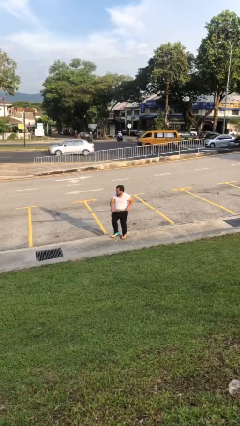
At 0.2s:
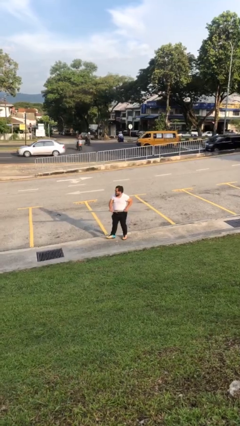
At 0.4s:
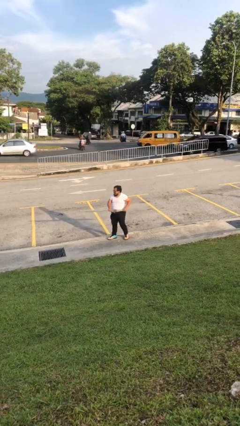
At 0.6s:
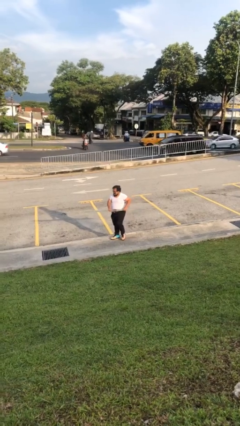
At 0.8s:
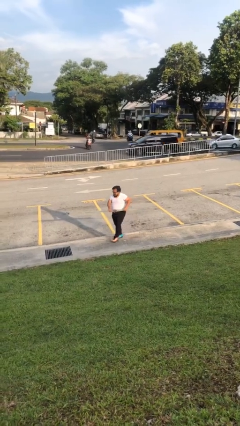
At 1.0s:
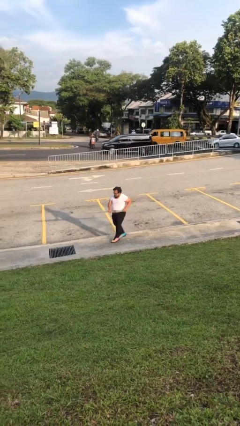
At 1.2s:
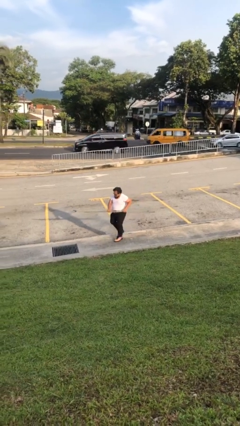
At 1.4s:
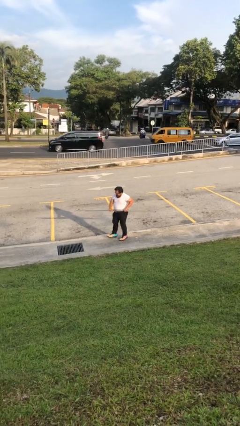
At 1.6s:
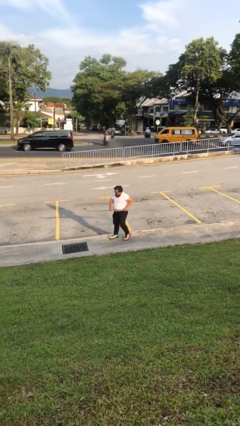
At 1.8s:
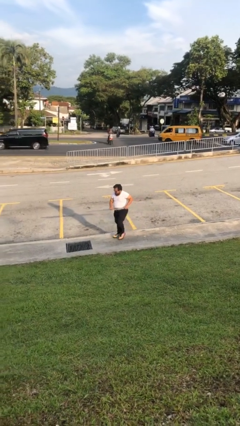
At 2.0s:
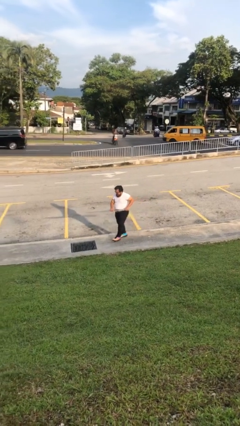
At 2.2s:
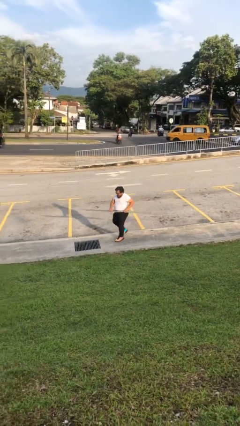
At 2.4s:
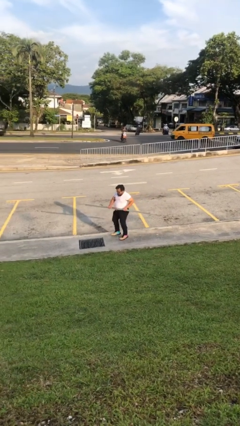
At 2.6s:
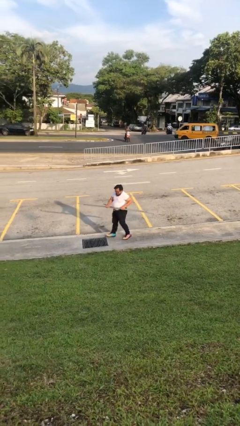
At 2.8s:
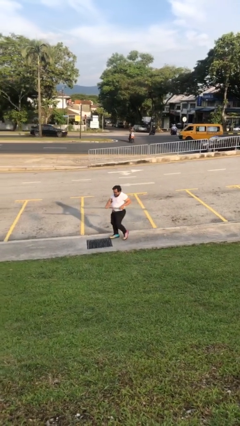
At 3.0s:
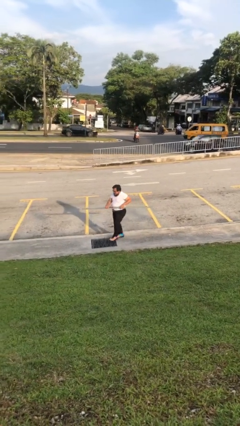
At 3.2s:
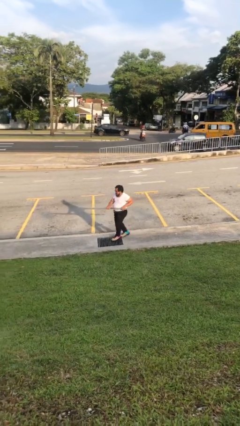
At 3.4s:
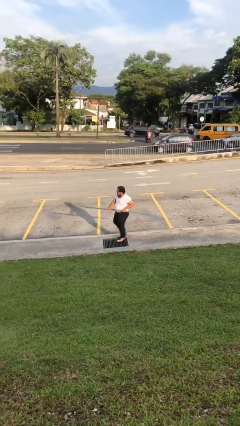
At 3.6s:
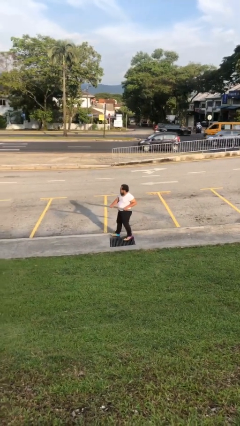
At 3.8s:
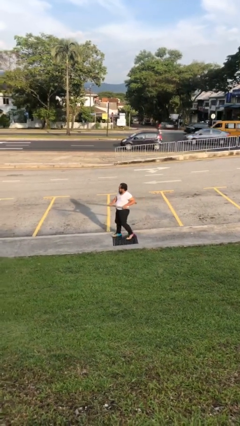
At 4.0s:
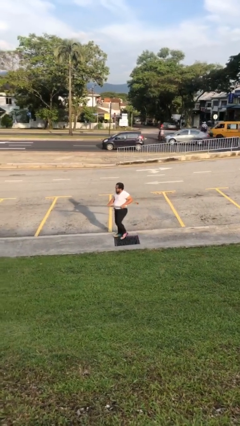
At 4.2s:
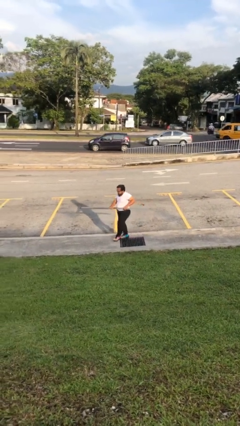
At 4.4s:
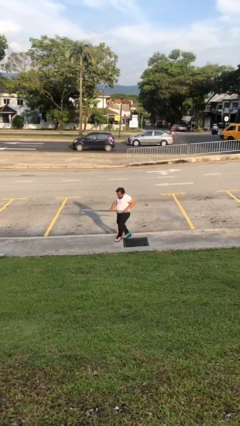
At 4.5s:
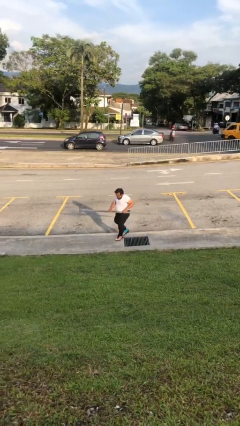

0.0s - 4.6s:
person carries heavy object

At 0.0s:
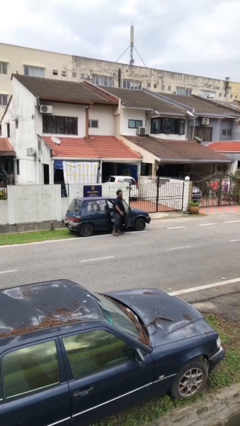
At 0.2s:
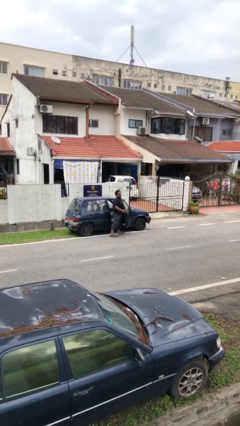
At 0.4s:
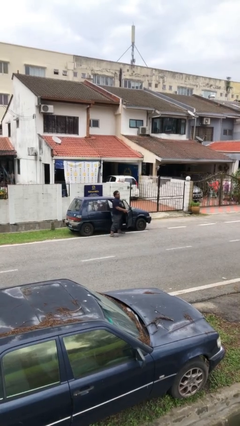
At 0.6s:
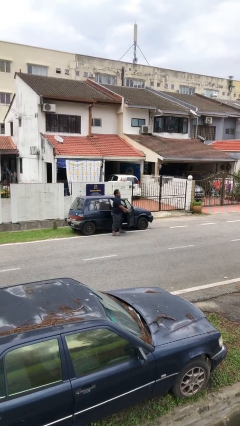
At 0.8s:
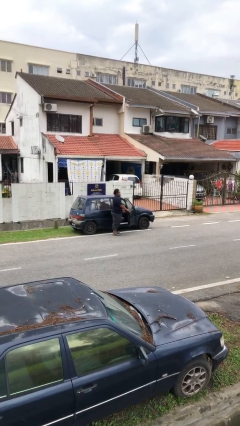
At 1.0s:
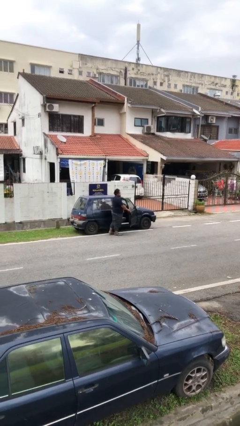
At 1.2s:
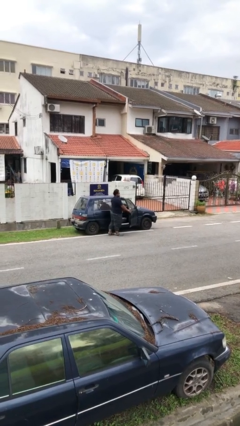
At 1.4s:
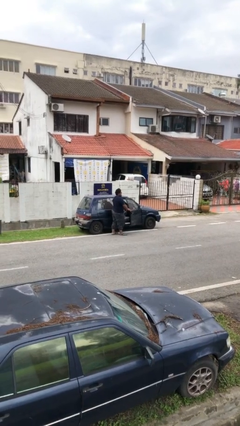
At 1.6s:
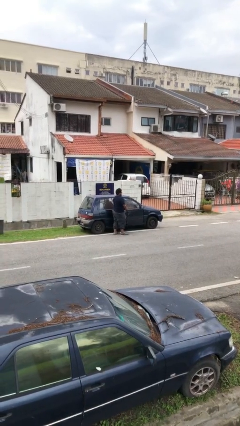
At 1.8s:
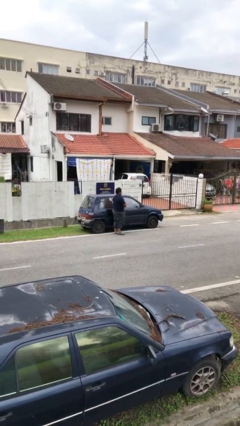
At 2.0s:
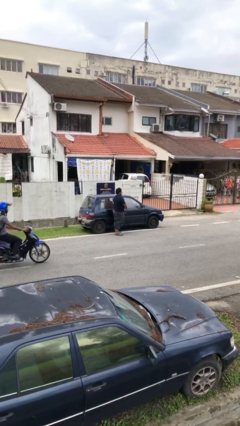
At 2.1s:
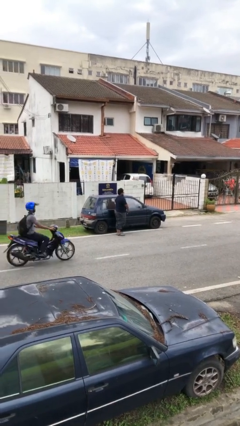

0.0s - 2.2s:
person closes car door

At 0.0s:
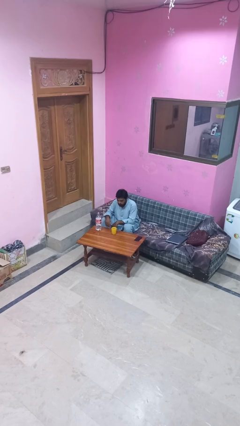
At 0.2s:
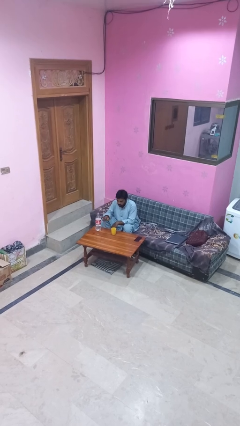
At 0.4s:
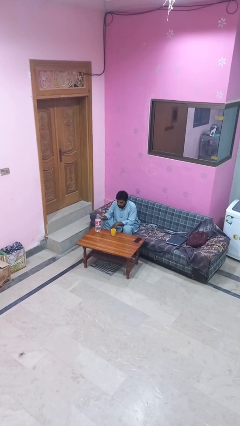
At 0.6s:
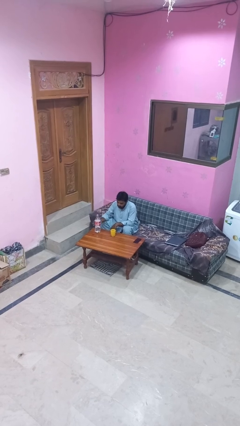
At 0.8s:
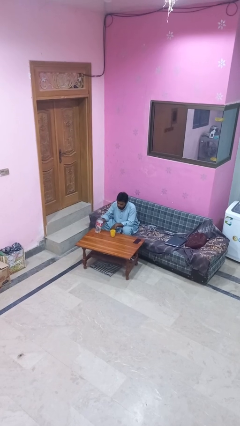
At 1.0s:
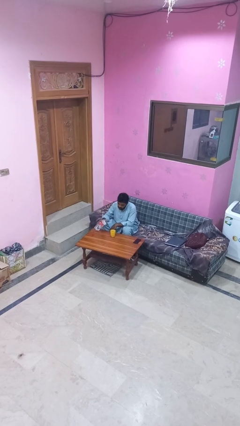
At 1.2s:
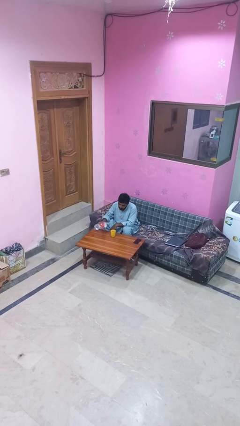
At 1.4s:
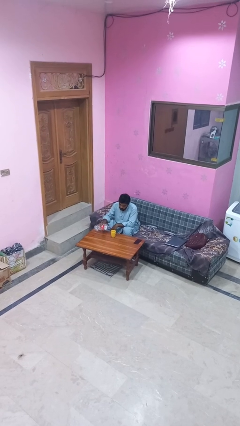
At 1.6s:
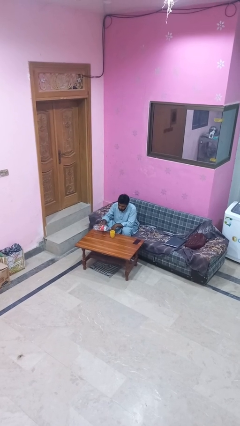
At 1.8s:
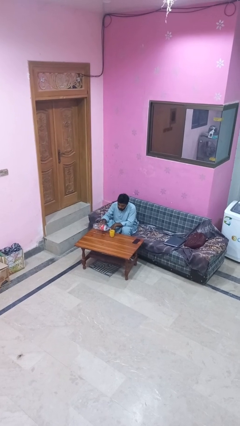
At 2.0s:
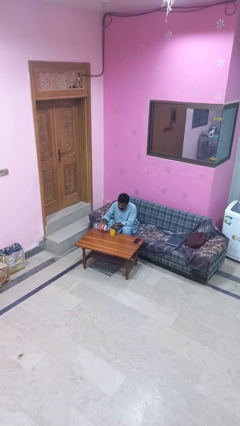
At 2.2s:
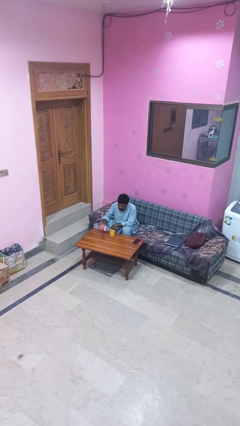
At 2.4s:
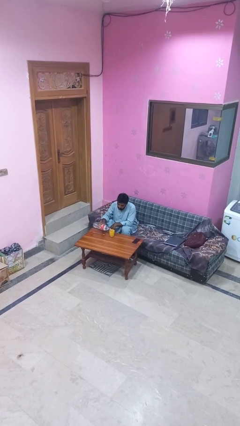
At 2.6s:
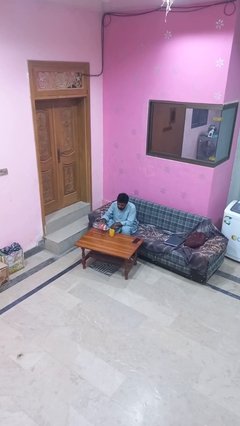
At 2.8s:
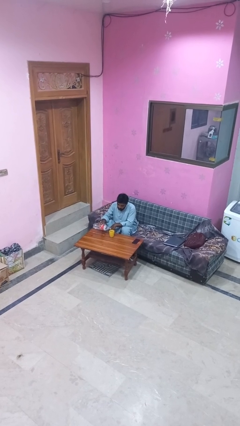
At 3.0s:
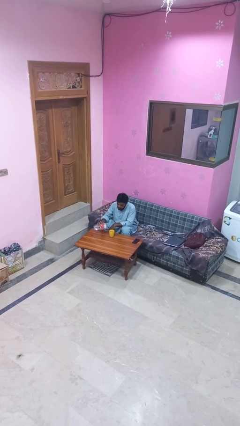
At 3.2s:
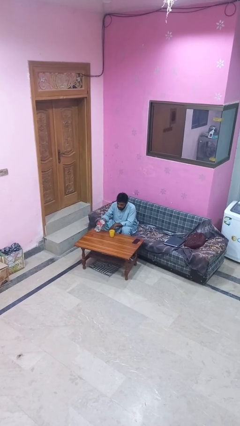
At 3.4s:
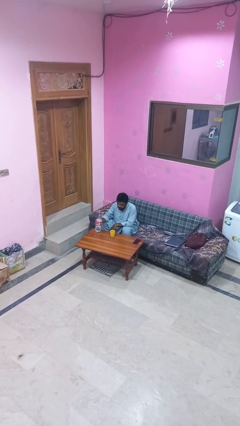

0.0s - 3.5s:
person pours liquid into cup

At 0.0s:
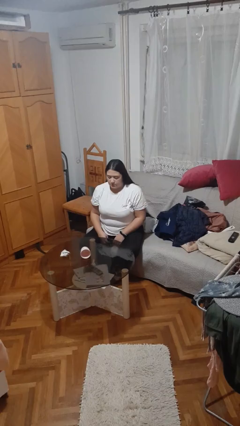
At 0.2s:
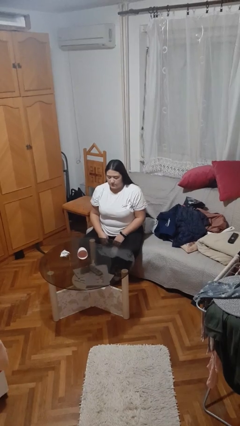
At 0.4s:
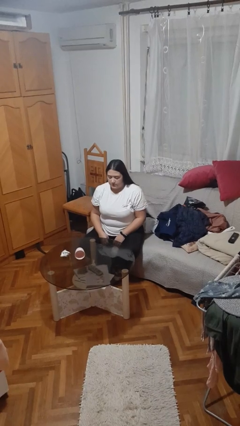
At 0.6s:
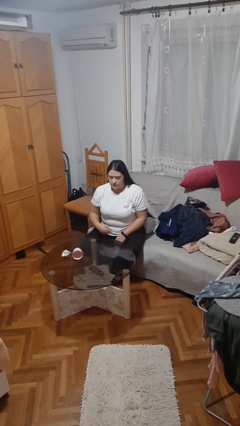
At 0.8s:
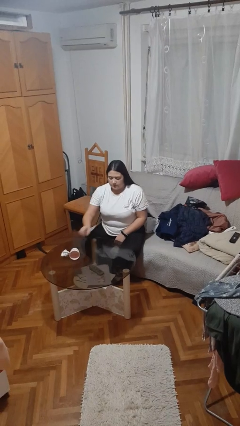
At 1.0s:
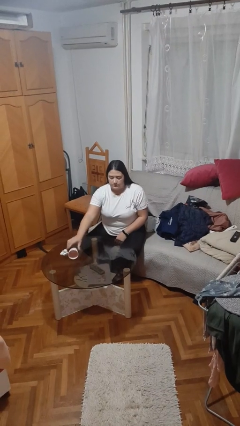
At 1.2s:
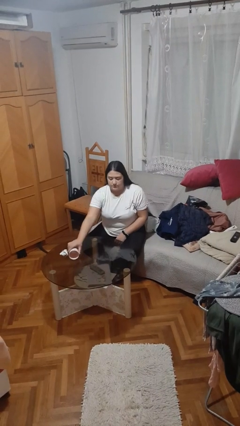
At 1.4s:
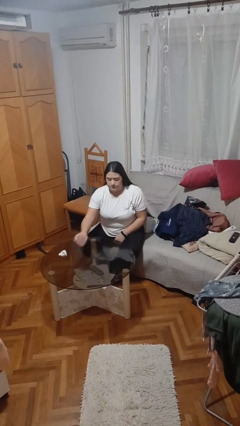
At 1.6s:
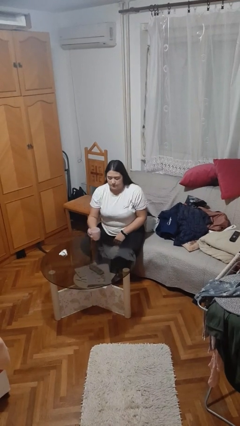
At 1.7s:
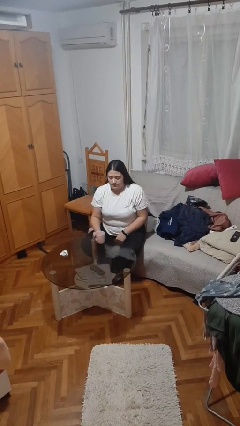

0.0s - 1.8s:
person sets upright glass

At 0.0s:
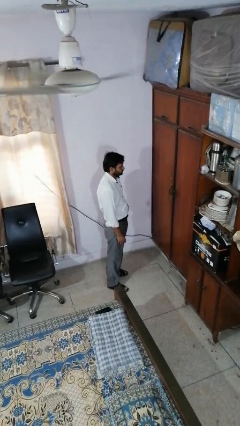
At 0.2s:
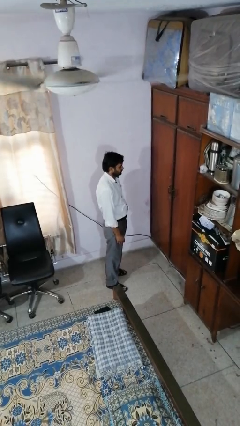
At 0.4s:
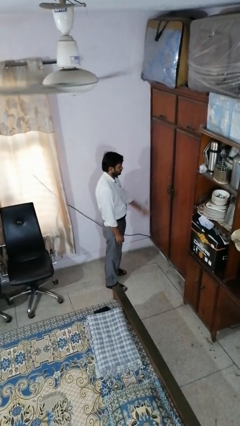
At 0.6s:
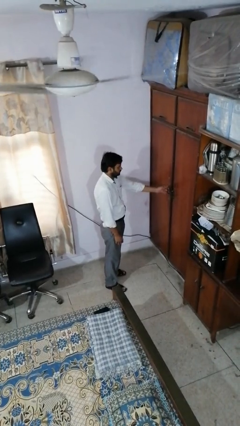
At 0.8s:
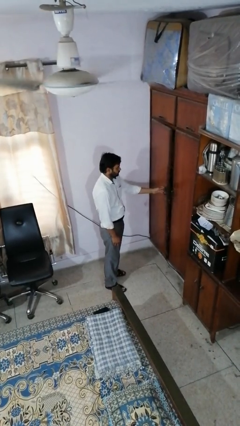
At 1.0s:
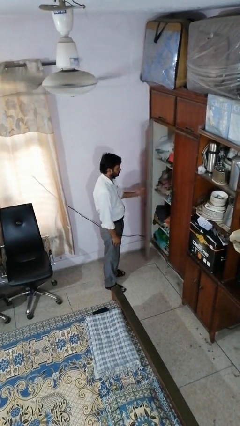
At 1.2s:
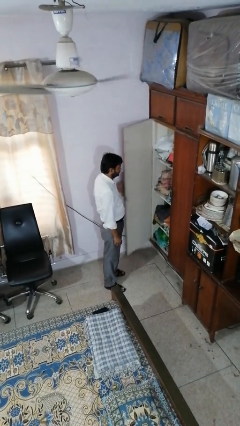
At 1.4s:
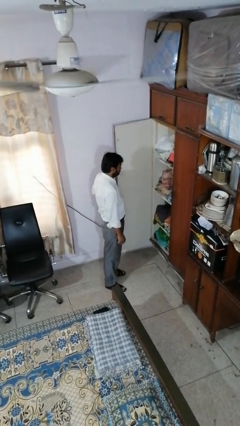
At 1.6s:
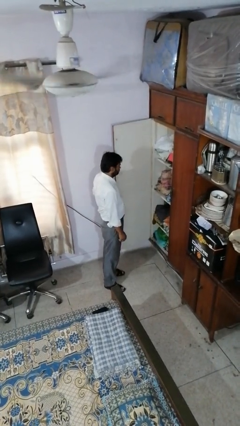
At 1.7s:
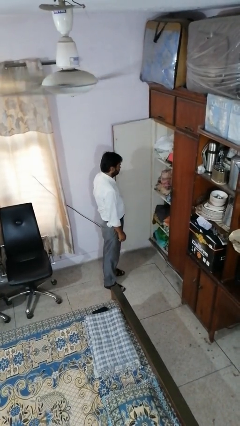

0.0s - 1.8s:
person opens closet door

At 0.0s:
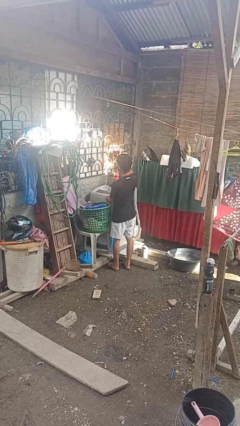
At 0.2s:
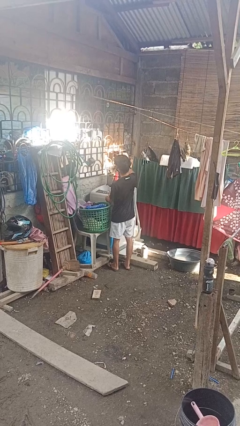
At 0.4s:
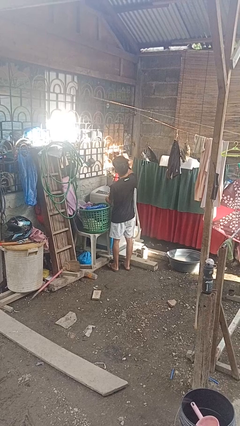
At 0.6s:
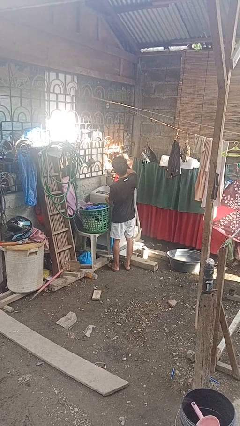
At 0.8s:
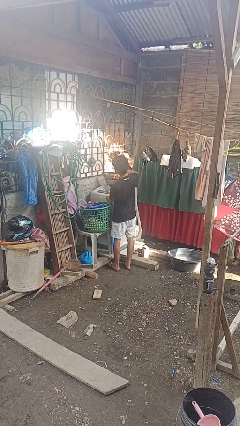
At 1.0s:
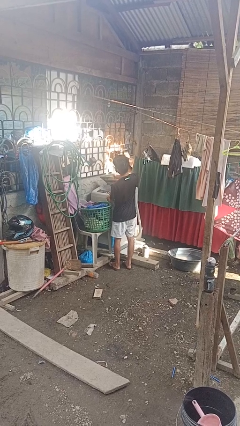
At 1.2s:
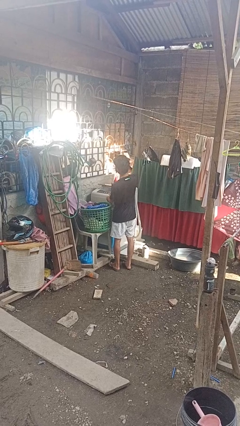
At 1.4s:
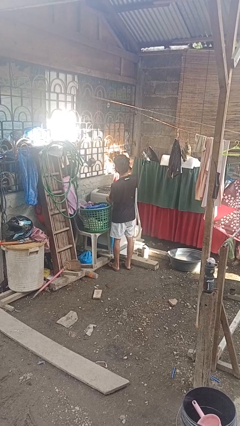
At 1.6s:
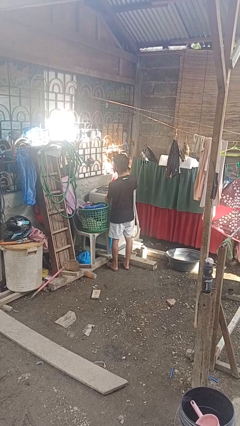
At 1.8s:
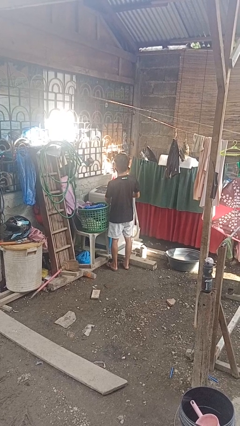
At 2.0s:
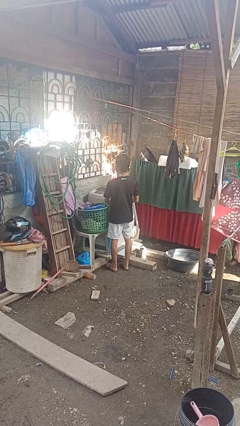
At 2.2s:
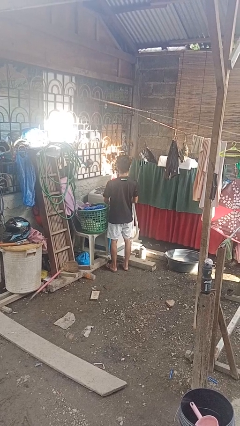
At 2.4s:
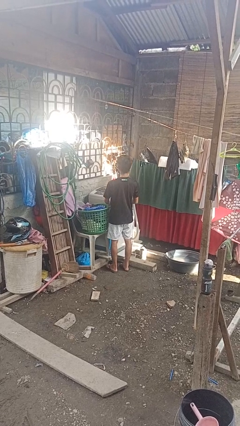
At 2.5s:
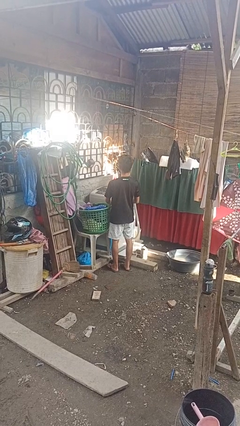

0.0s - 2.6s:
person closes clothes washer

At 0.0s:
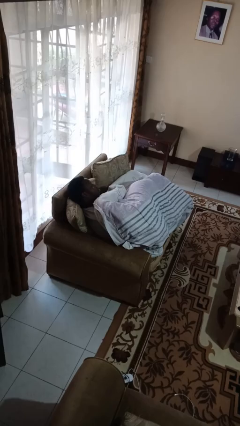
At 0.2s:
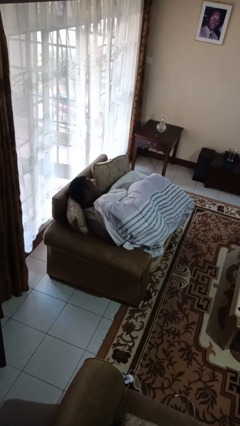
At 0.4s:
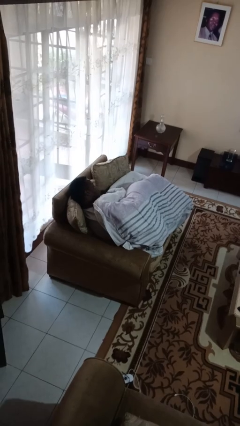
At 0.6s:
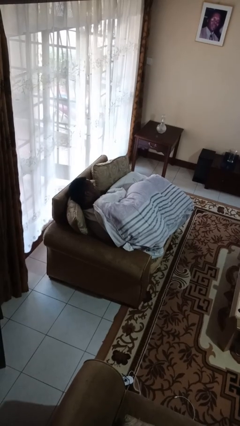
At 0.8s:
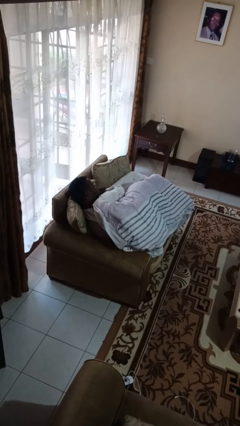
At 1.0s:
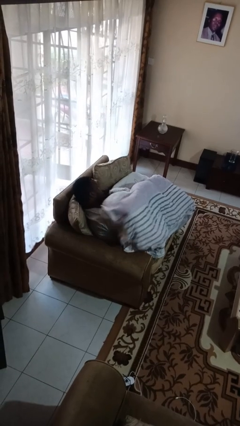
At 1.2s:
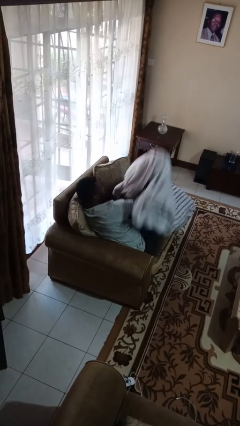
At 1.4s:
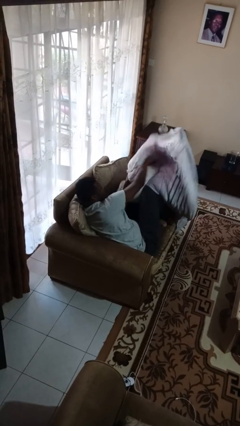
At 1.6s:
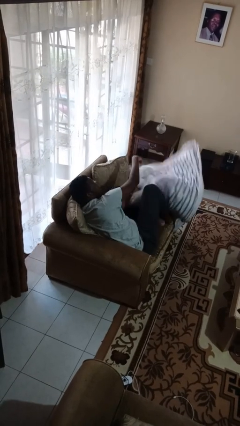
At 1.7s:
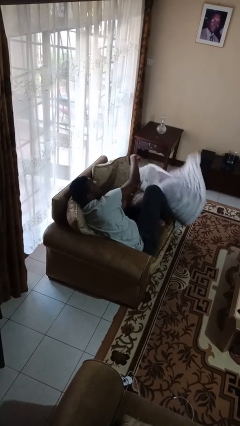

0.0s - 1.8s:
person uncovers with blanket
